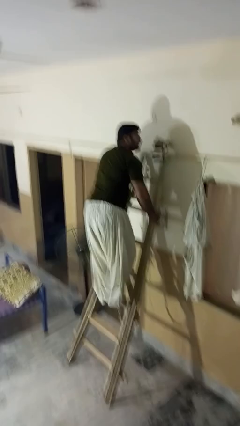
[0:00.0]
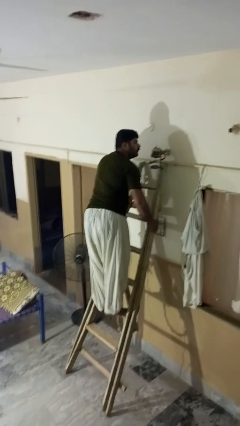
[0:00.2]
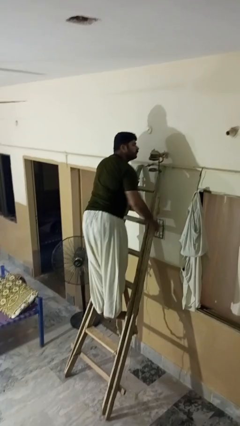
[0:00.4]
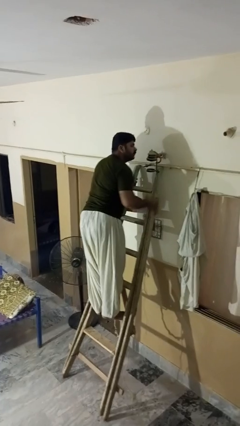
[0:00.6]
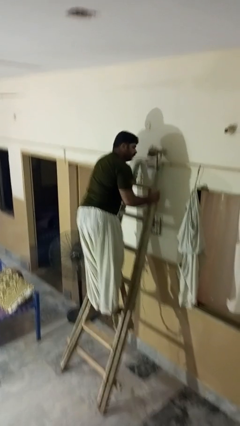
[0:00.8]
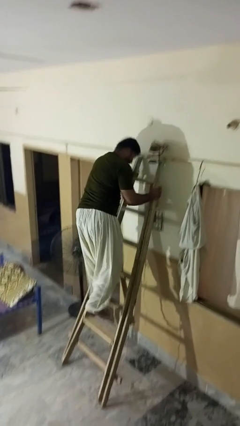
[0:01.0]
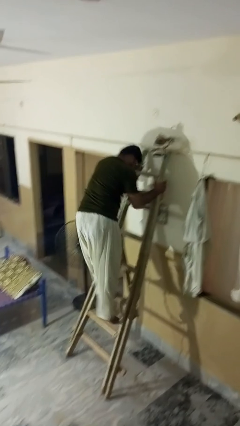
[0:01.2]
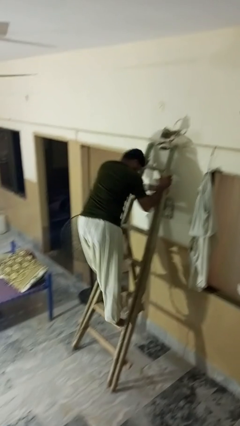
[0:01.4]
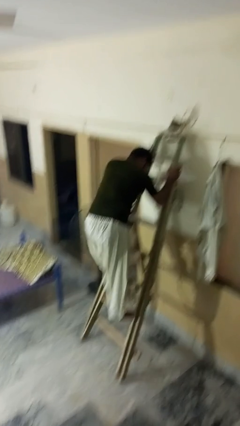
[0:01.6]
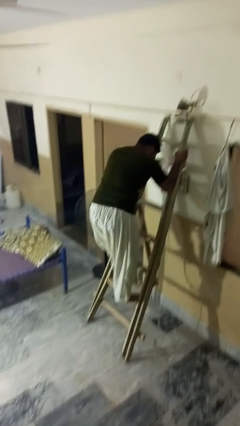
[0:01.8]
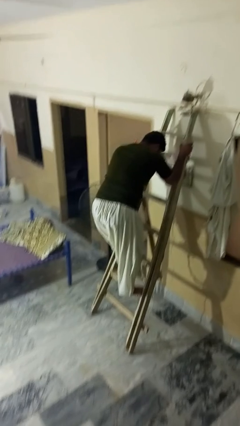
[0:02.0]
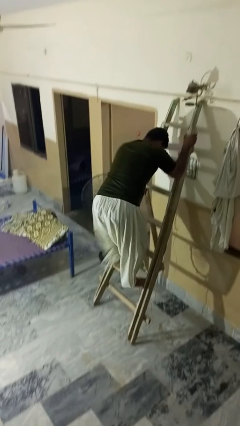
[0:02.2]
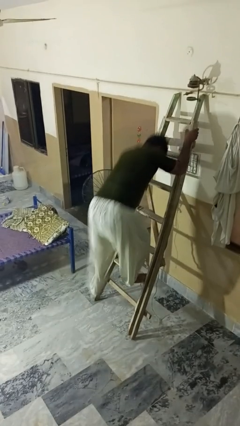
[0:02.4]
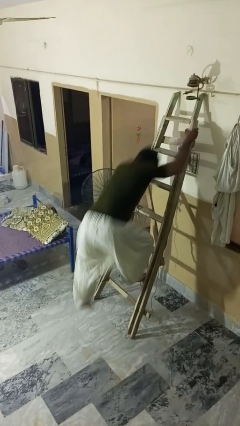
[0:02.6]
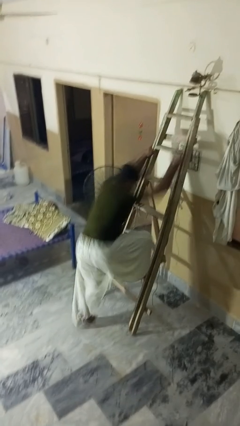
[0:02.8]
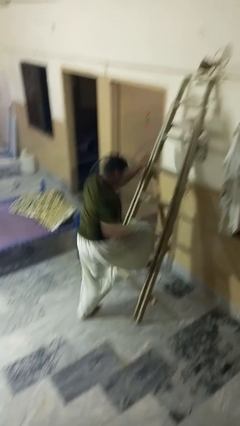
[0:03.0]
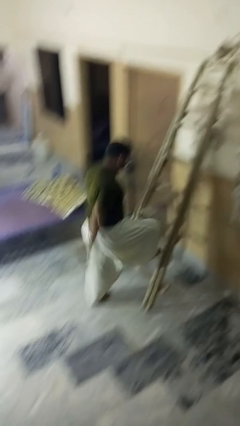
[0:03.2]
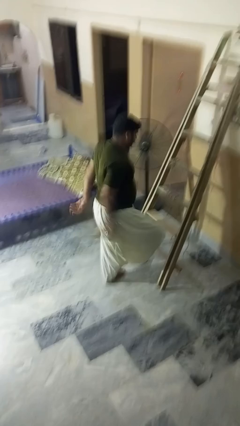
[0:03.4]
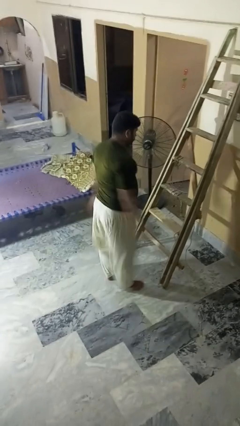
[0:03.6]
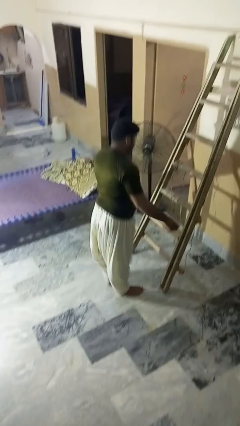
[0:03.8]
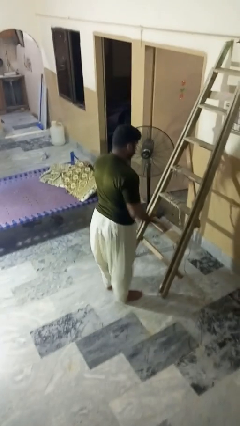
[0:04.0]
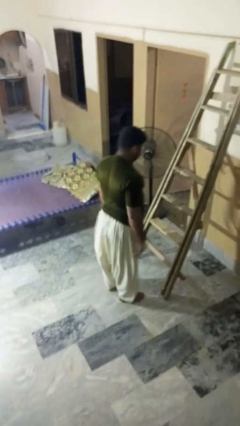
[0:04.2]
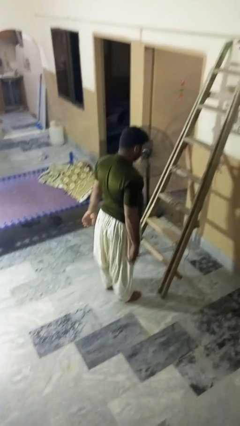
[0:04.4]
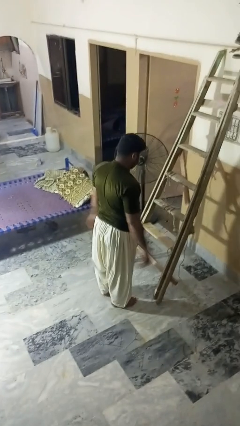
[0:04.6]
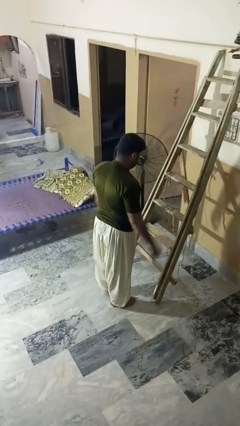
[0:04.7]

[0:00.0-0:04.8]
person climbs down ladder

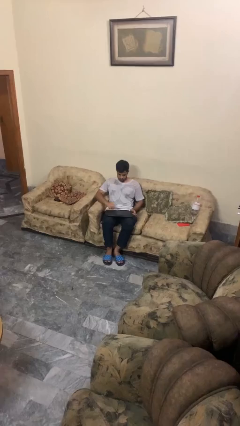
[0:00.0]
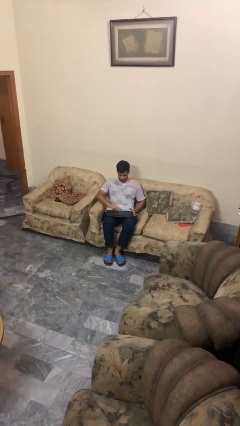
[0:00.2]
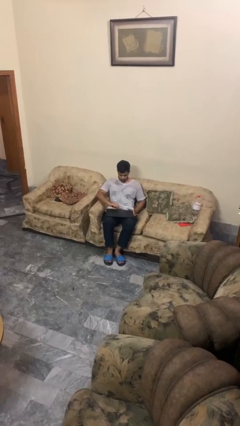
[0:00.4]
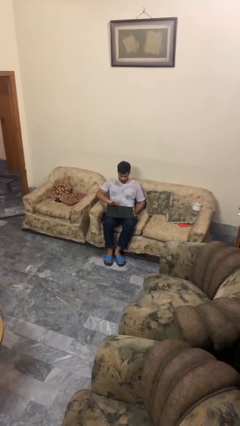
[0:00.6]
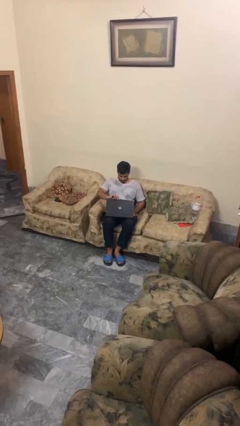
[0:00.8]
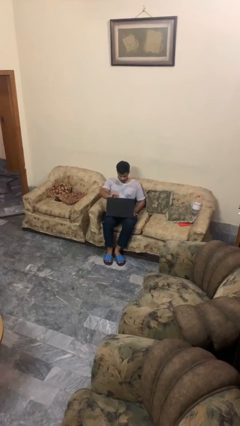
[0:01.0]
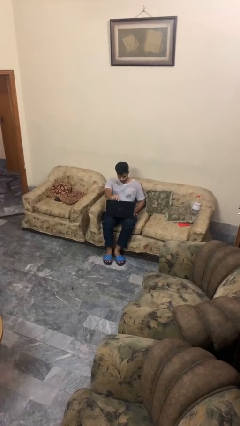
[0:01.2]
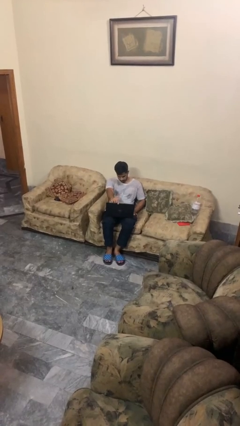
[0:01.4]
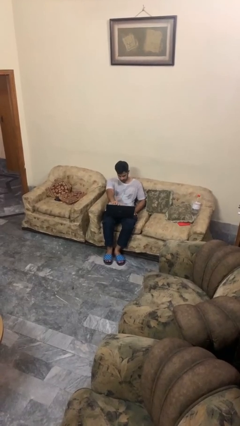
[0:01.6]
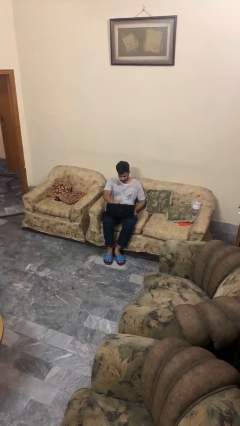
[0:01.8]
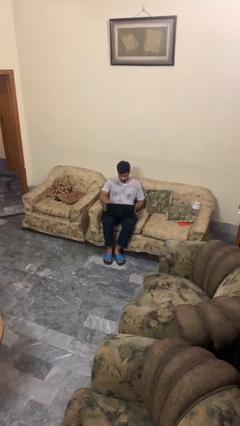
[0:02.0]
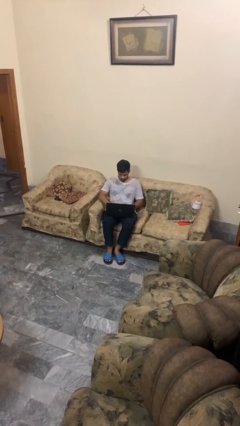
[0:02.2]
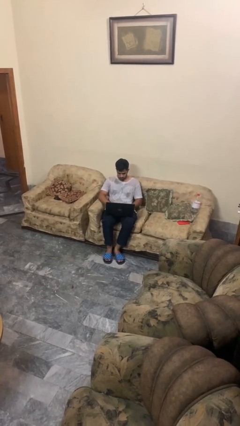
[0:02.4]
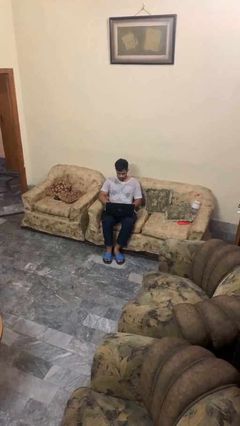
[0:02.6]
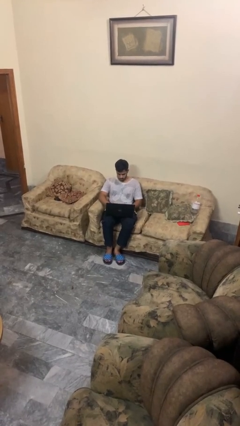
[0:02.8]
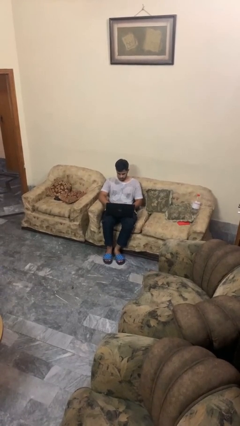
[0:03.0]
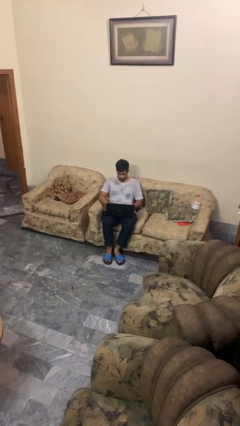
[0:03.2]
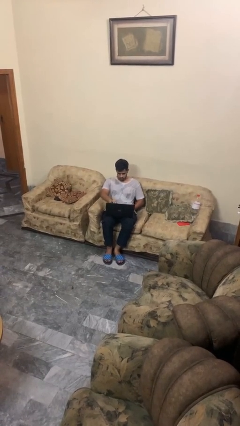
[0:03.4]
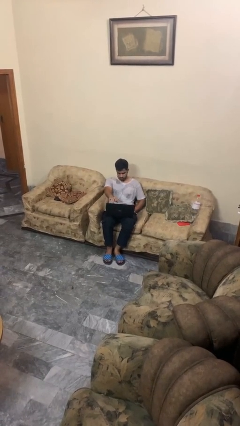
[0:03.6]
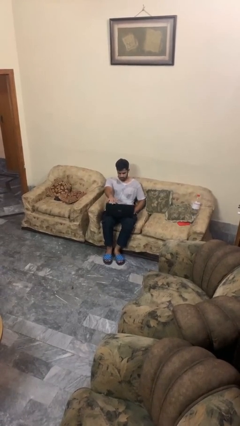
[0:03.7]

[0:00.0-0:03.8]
person opens laptop

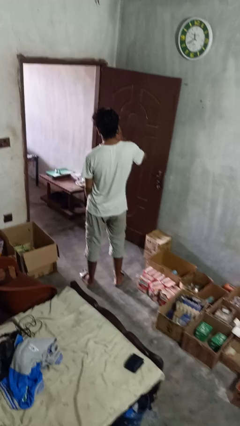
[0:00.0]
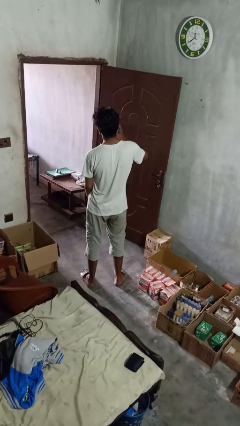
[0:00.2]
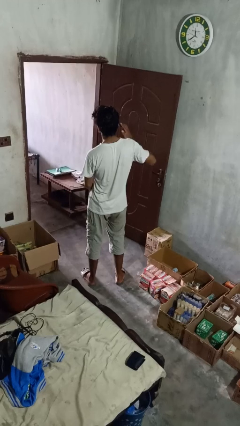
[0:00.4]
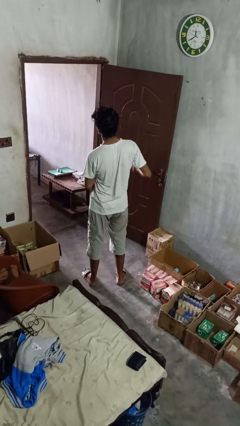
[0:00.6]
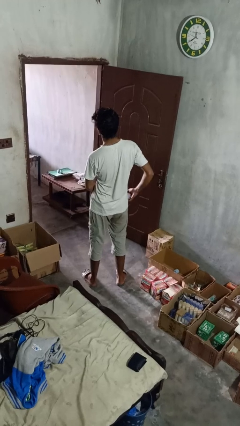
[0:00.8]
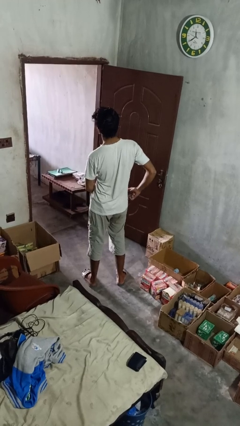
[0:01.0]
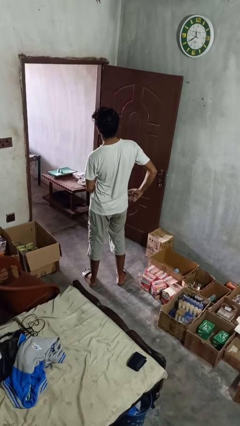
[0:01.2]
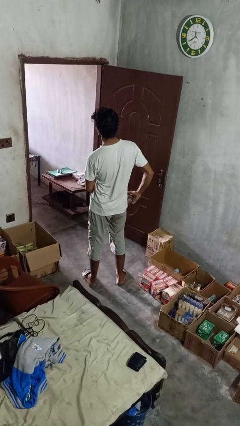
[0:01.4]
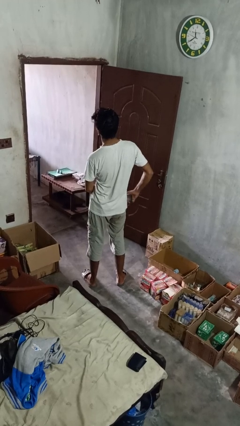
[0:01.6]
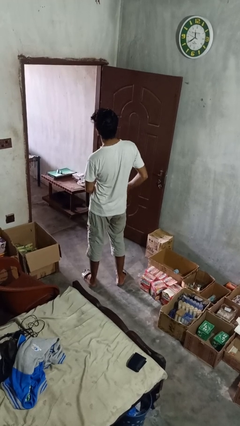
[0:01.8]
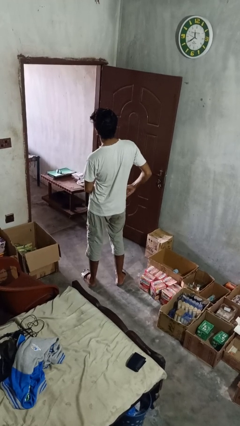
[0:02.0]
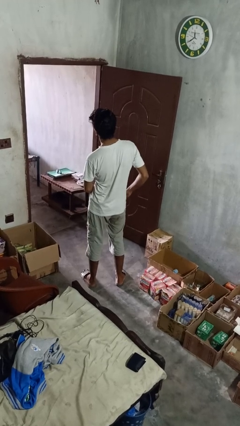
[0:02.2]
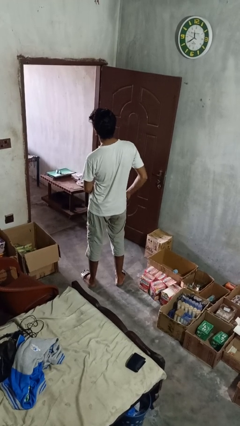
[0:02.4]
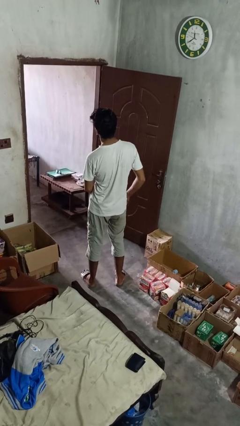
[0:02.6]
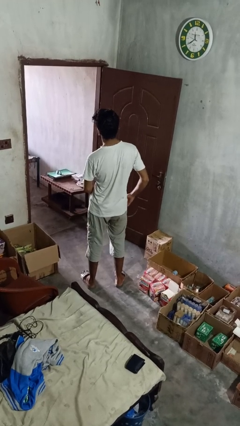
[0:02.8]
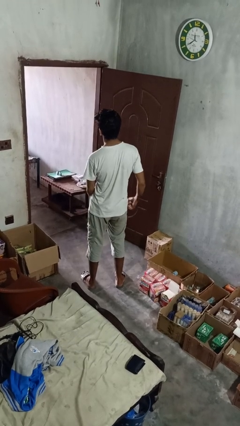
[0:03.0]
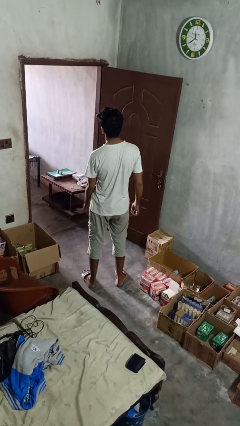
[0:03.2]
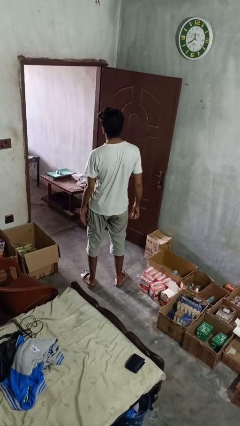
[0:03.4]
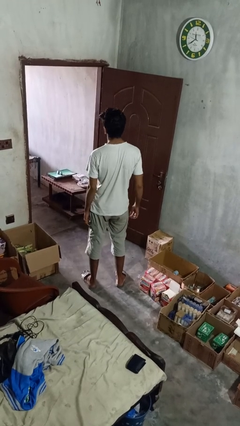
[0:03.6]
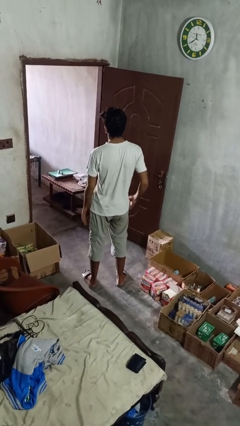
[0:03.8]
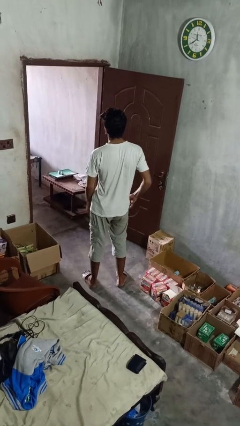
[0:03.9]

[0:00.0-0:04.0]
person puts phone into pocket

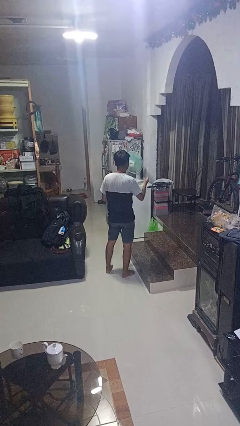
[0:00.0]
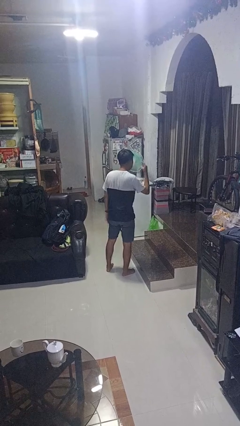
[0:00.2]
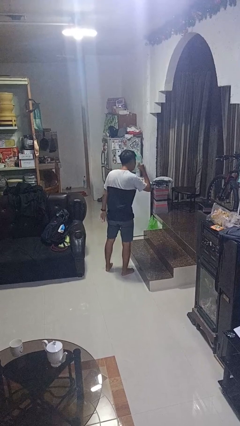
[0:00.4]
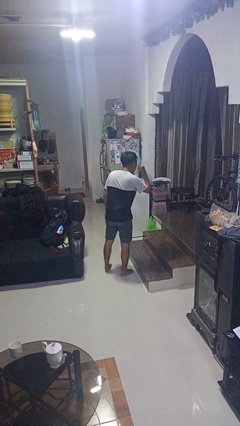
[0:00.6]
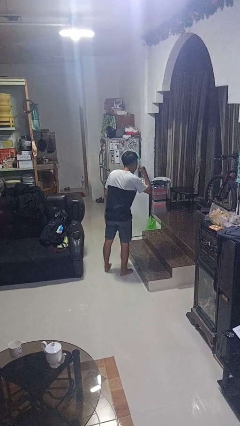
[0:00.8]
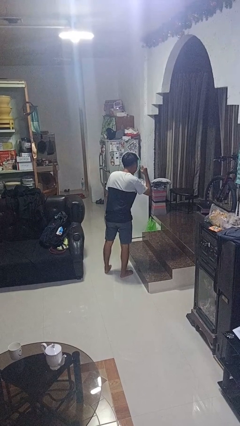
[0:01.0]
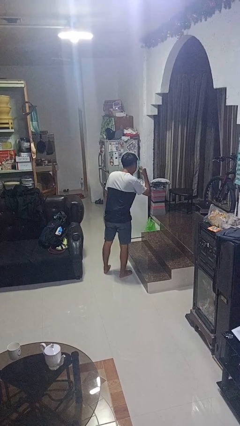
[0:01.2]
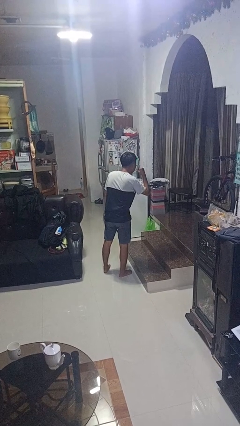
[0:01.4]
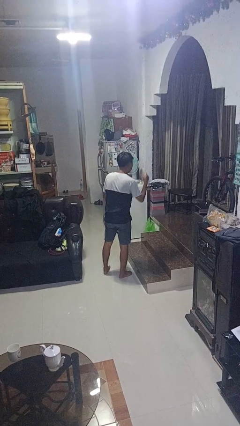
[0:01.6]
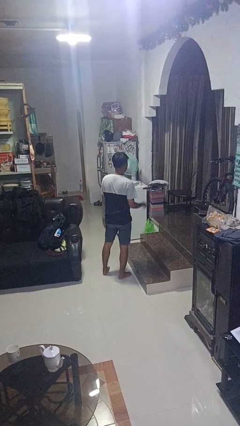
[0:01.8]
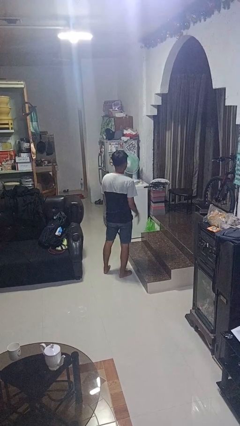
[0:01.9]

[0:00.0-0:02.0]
person gestures listen closely

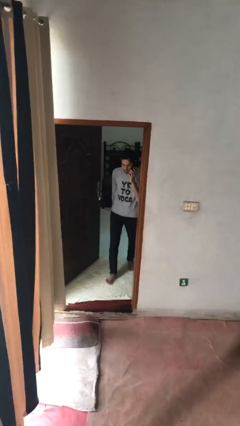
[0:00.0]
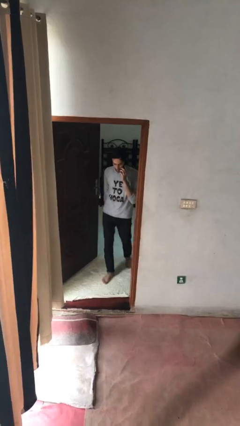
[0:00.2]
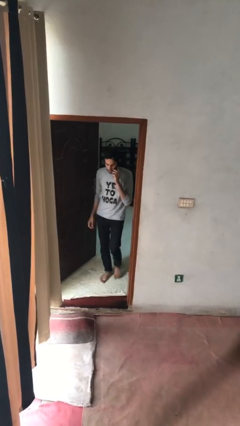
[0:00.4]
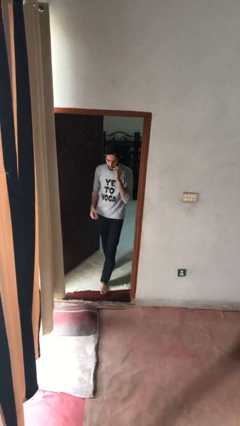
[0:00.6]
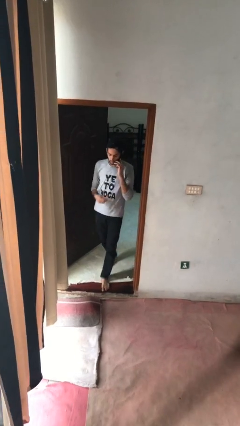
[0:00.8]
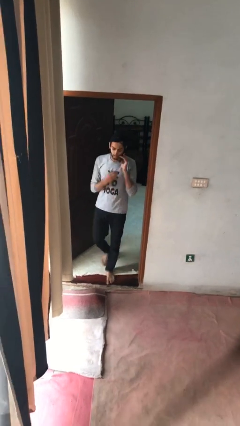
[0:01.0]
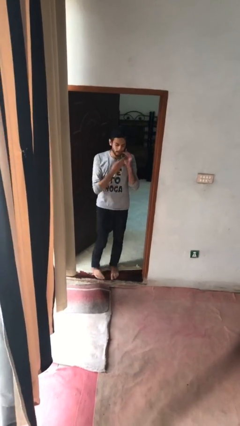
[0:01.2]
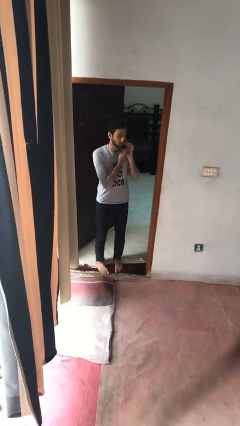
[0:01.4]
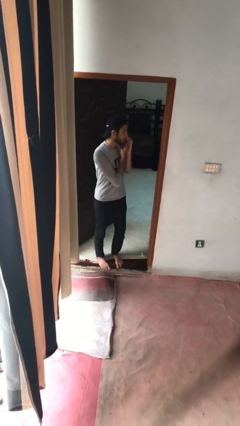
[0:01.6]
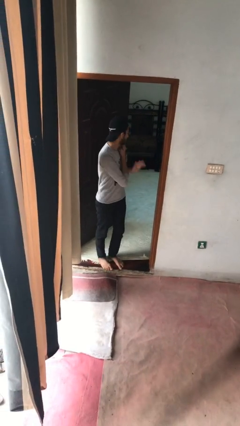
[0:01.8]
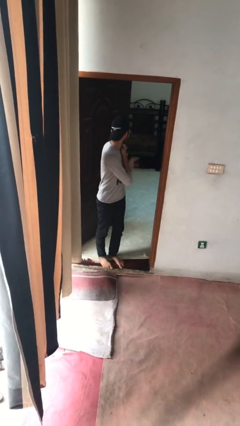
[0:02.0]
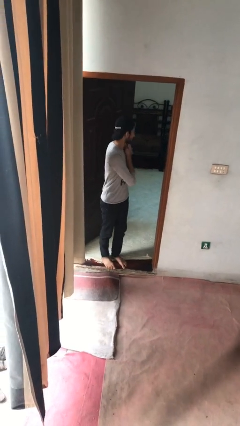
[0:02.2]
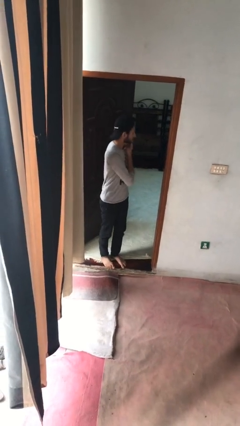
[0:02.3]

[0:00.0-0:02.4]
person enters scene through structure

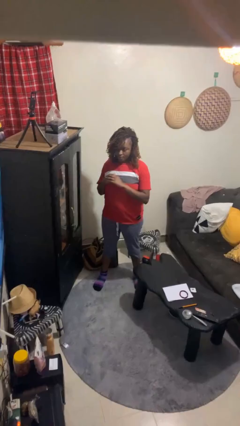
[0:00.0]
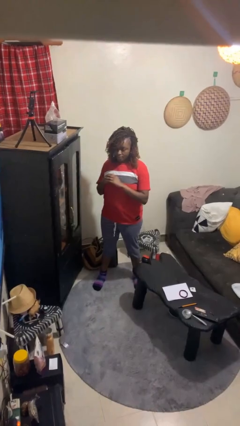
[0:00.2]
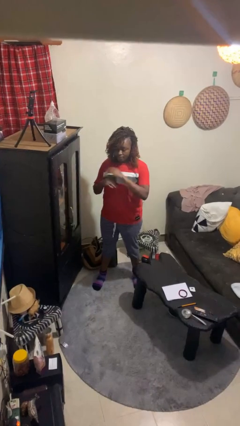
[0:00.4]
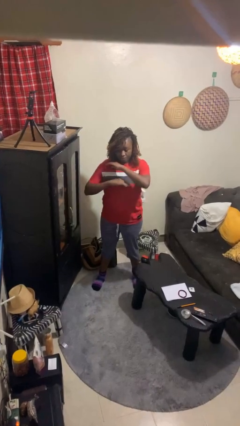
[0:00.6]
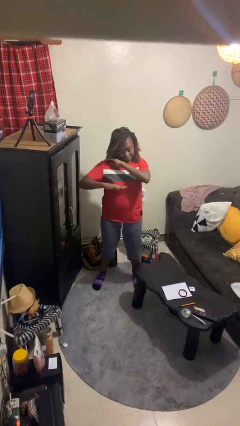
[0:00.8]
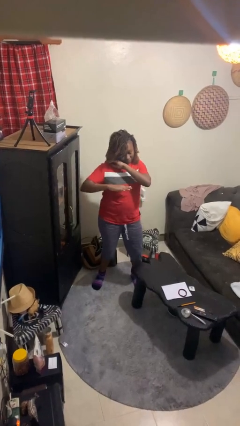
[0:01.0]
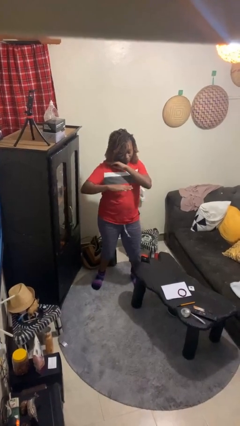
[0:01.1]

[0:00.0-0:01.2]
person karate chop
